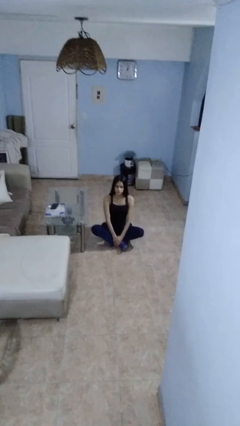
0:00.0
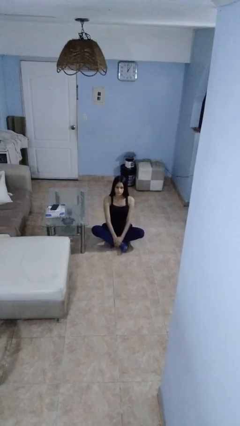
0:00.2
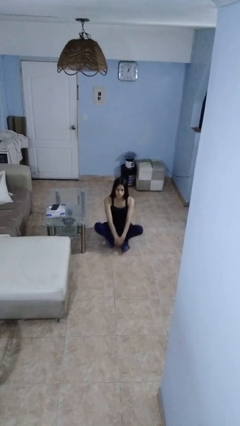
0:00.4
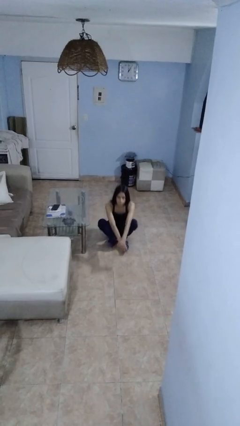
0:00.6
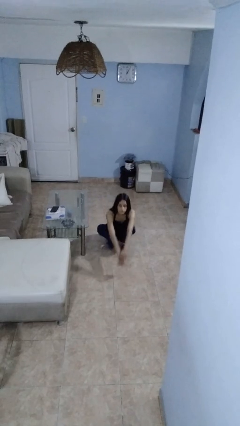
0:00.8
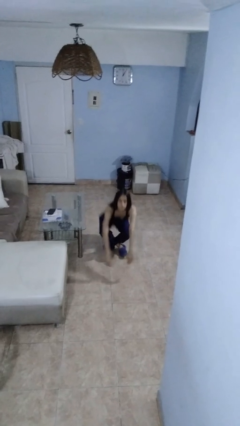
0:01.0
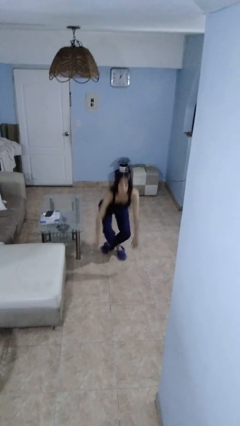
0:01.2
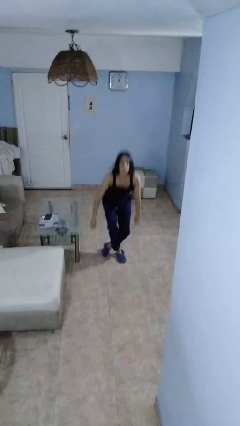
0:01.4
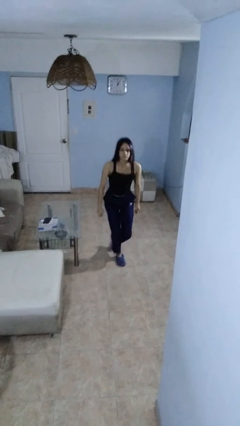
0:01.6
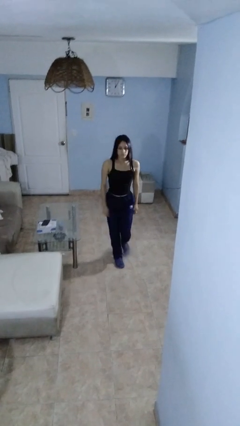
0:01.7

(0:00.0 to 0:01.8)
person stands up from floor

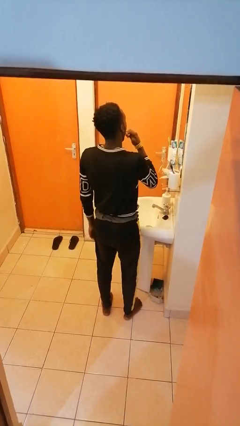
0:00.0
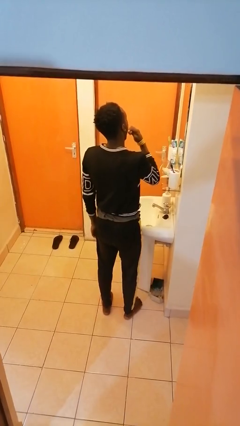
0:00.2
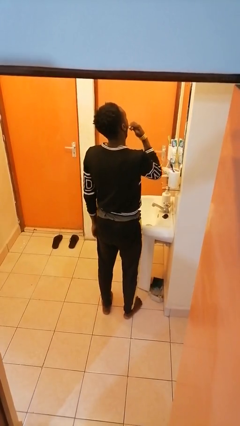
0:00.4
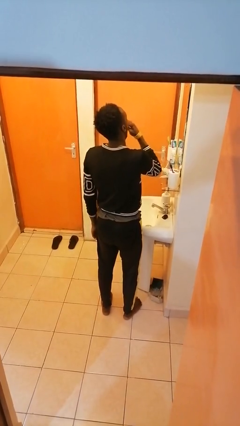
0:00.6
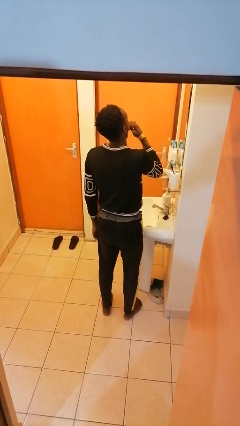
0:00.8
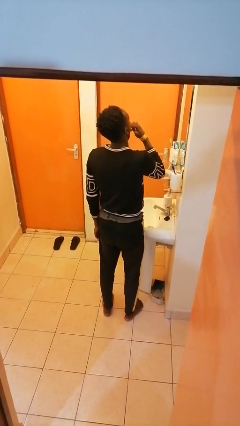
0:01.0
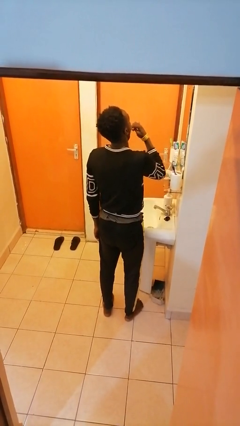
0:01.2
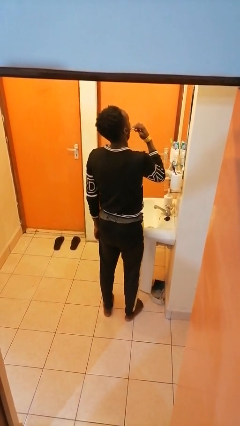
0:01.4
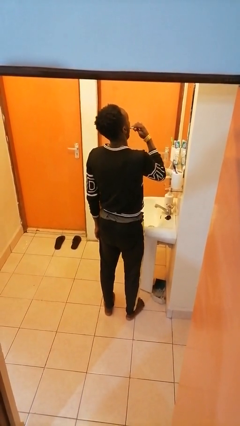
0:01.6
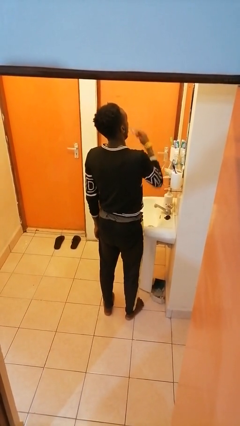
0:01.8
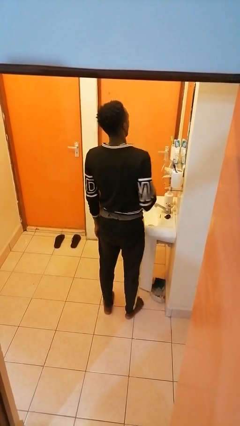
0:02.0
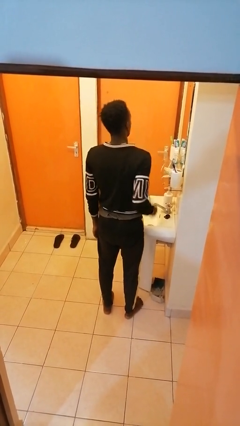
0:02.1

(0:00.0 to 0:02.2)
person brushes teeth

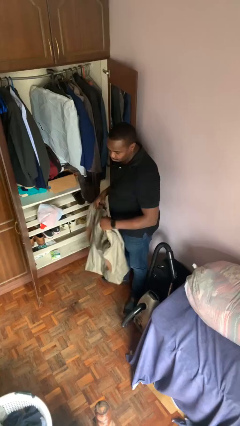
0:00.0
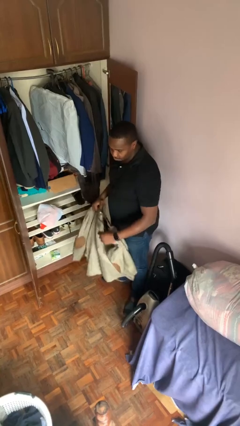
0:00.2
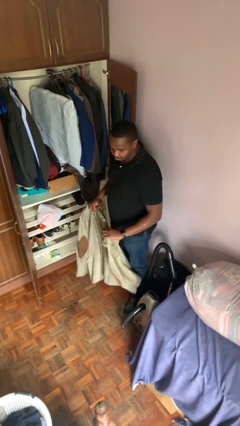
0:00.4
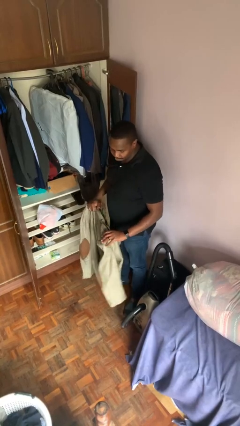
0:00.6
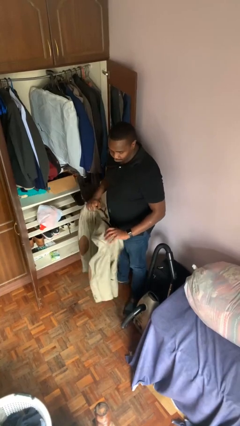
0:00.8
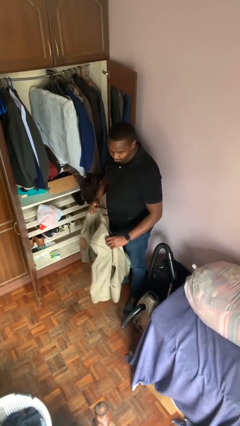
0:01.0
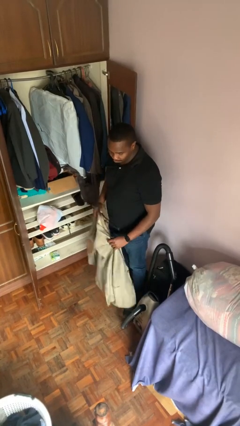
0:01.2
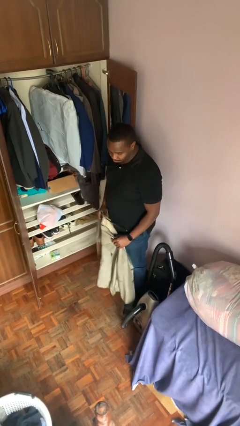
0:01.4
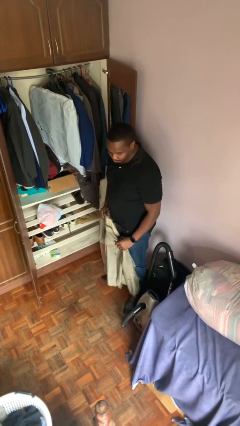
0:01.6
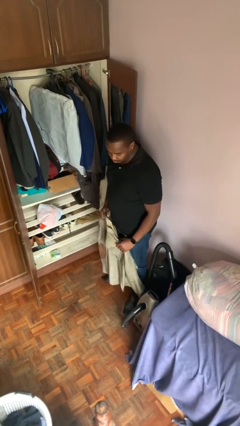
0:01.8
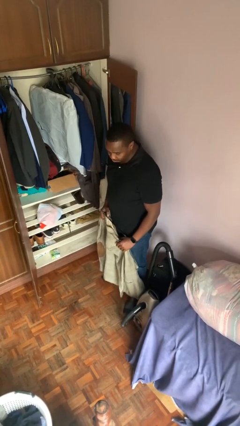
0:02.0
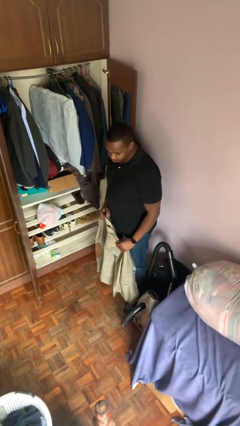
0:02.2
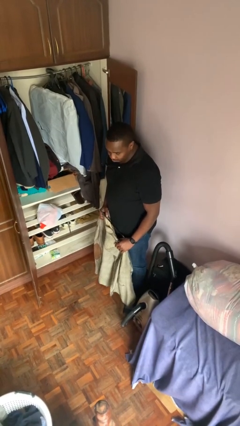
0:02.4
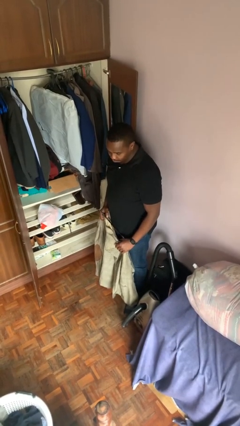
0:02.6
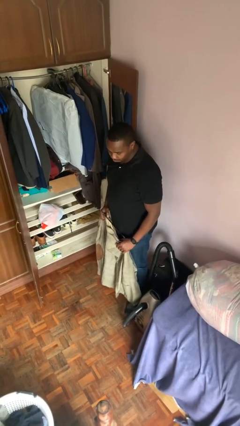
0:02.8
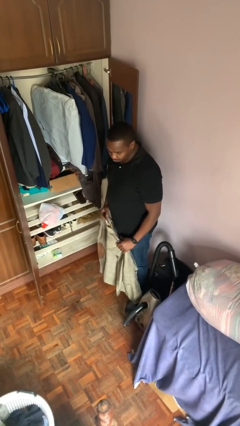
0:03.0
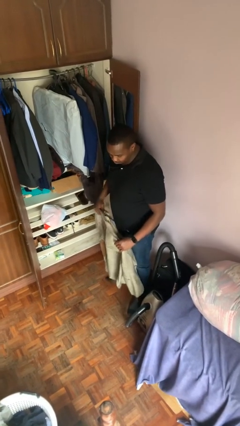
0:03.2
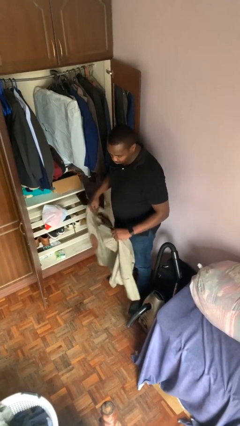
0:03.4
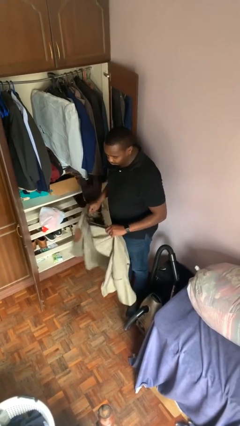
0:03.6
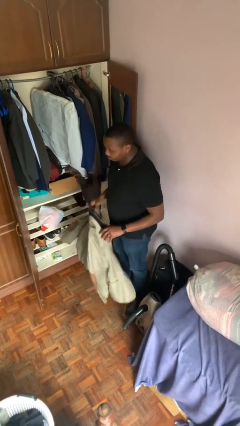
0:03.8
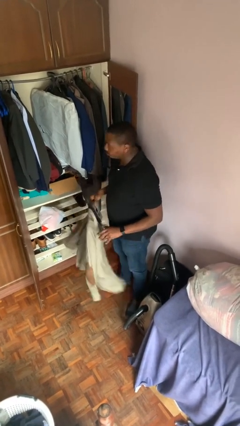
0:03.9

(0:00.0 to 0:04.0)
person takes clothes from closet

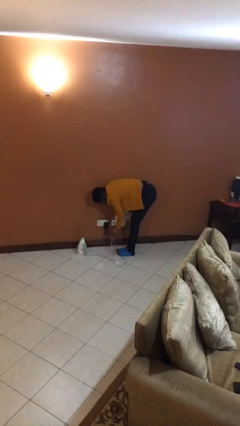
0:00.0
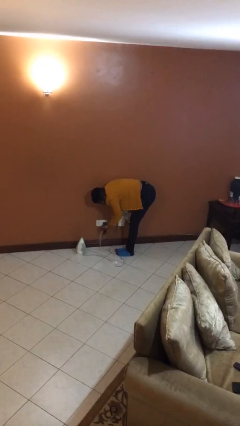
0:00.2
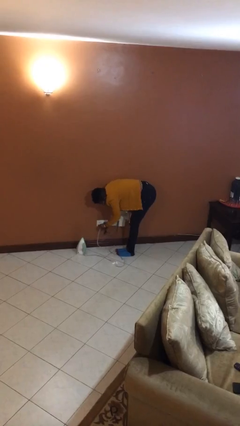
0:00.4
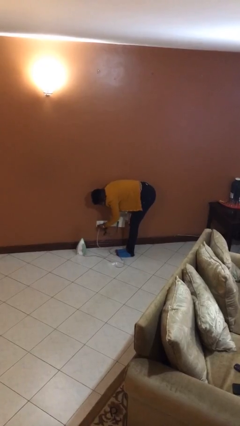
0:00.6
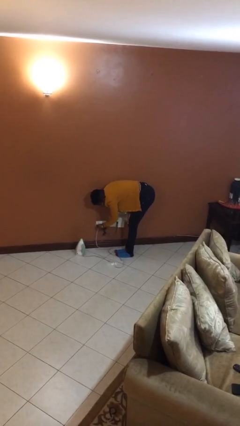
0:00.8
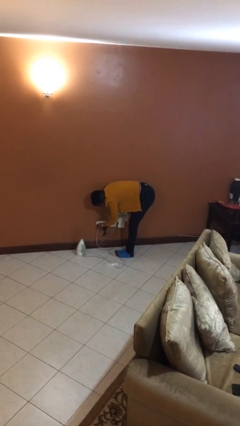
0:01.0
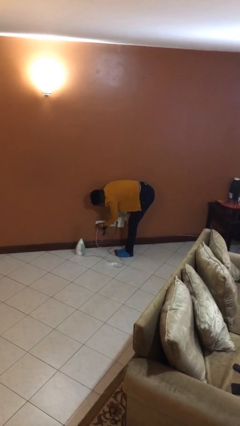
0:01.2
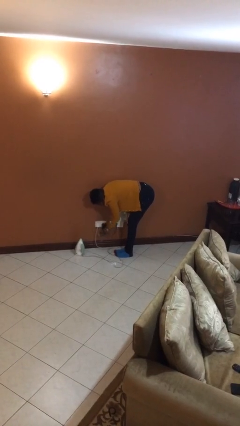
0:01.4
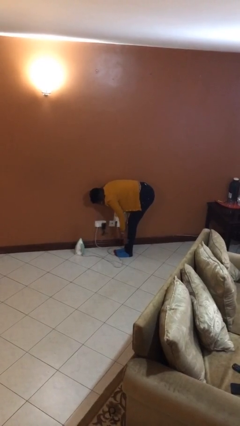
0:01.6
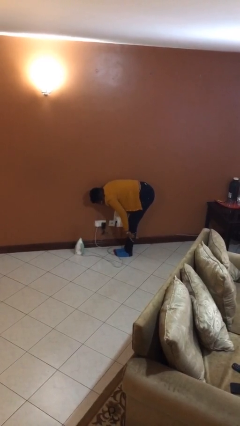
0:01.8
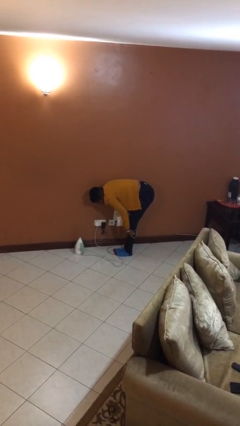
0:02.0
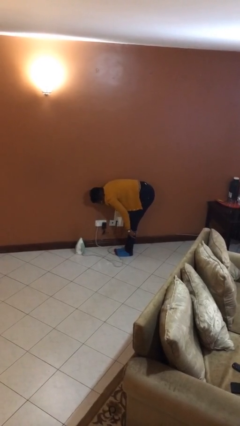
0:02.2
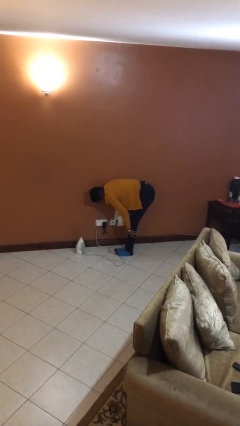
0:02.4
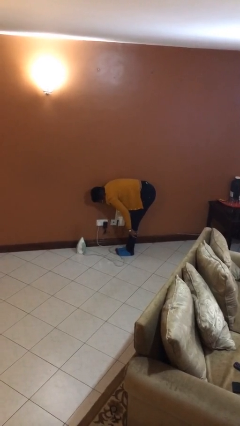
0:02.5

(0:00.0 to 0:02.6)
person plugs into electrical socket

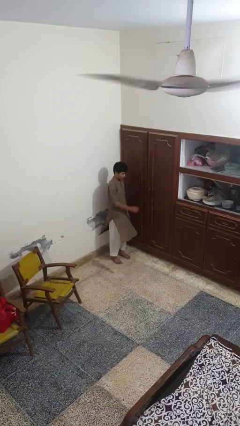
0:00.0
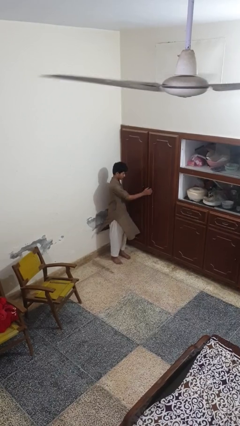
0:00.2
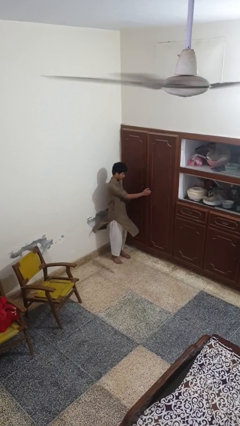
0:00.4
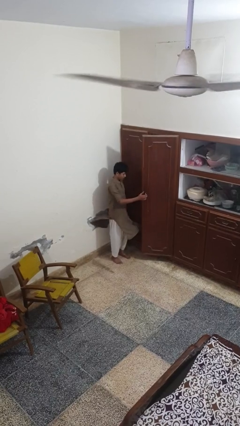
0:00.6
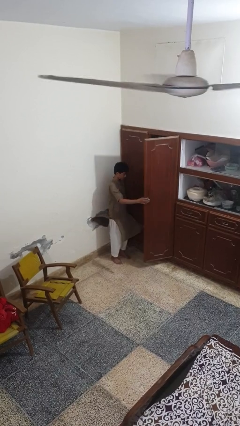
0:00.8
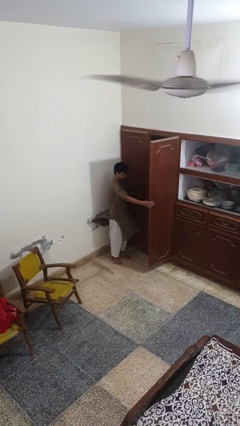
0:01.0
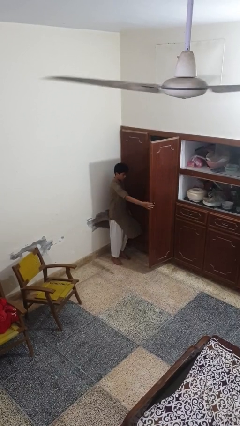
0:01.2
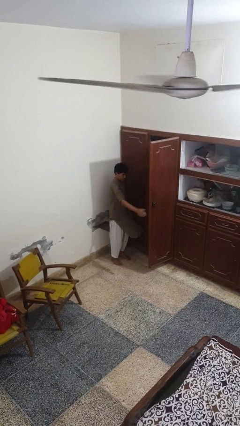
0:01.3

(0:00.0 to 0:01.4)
person opens closet door

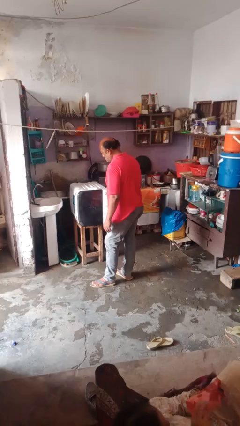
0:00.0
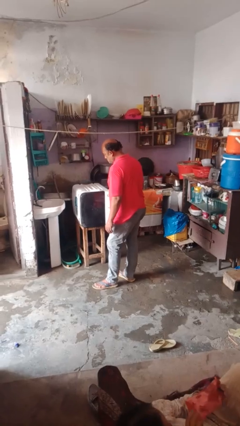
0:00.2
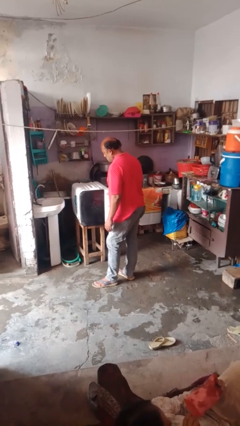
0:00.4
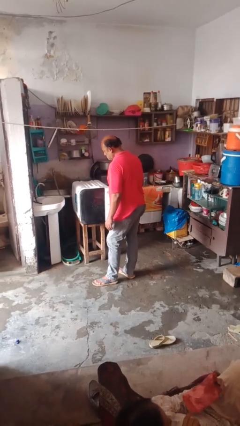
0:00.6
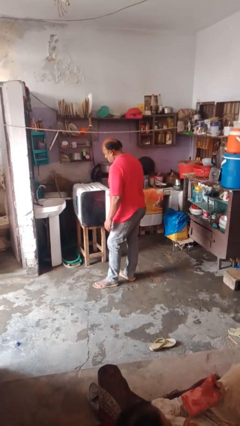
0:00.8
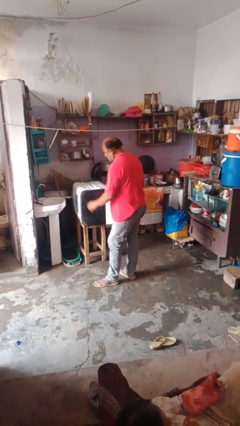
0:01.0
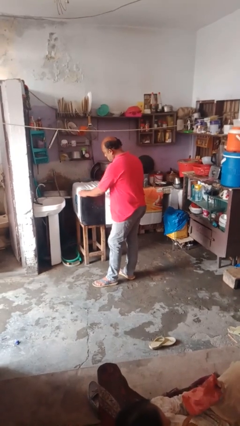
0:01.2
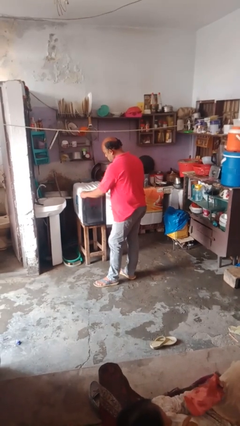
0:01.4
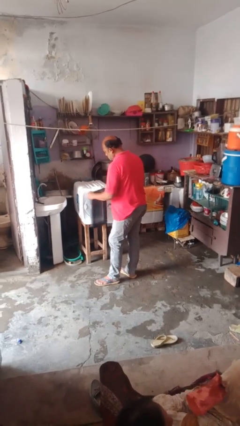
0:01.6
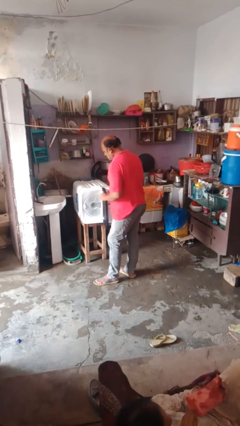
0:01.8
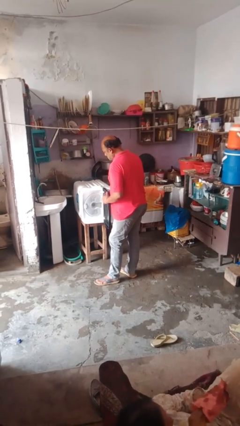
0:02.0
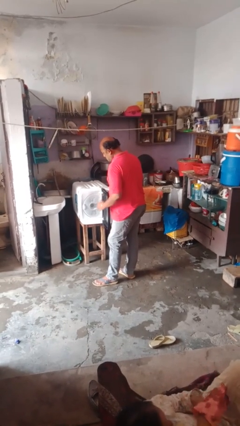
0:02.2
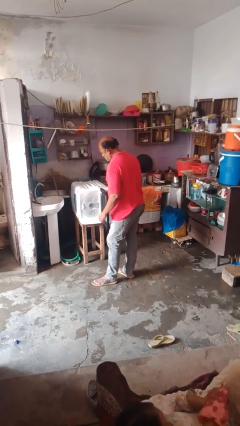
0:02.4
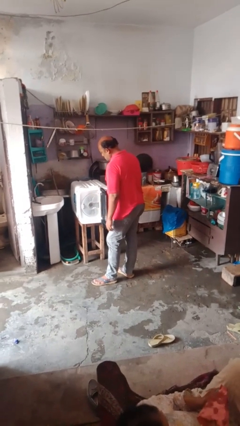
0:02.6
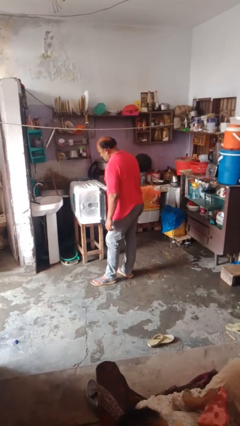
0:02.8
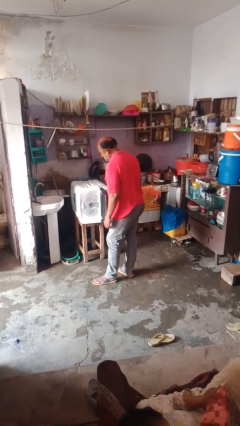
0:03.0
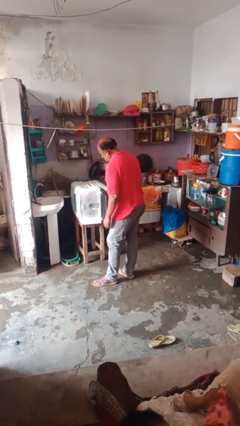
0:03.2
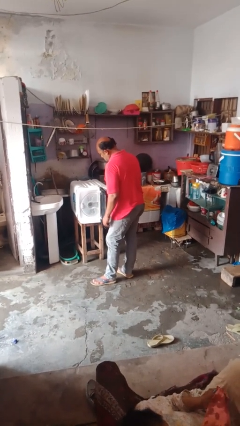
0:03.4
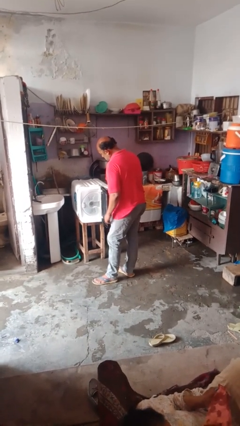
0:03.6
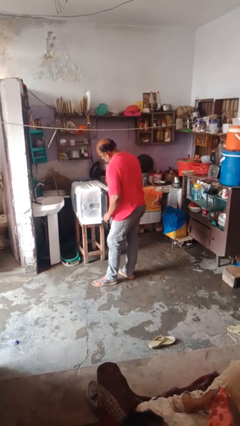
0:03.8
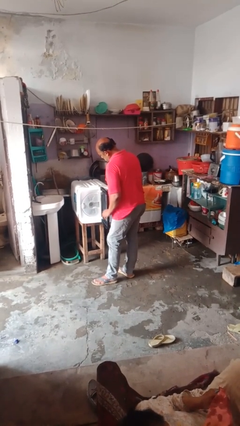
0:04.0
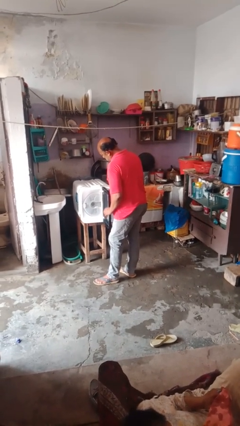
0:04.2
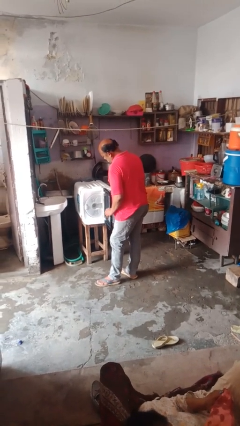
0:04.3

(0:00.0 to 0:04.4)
person opens dishwasher

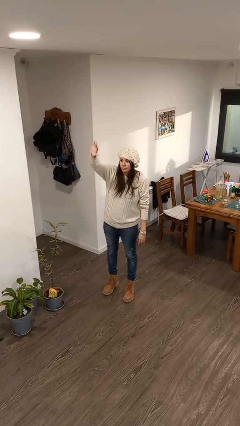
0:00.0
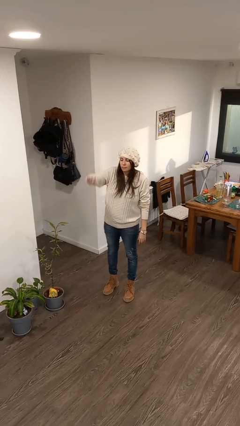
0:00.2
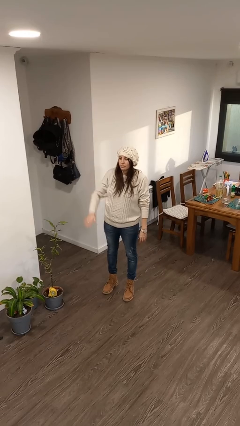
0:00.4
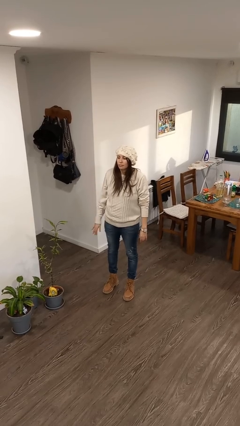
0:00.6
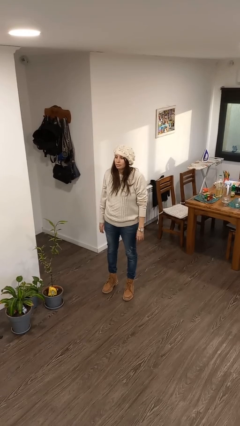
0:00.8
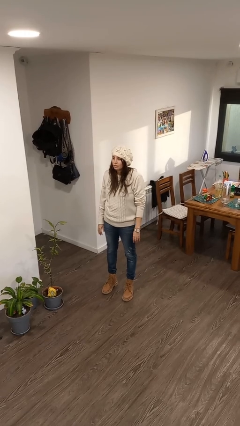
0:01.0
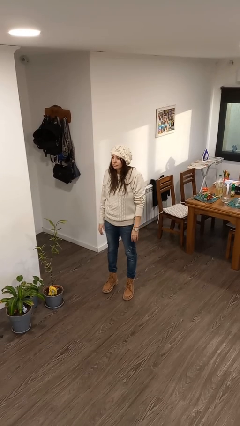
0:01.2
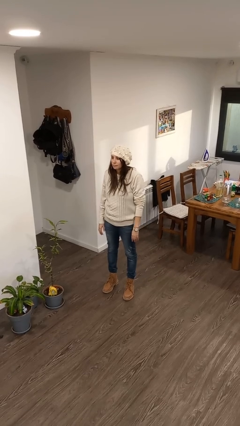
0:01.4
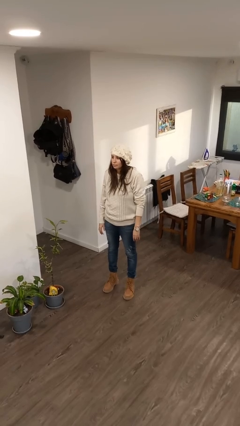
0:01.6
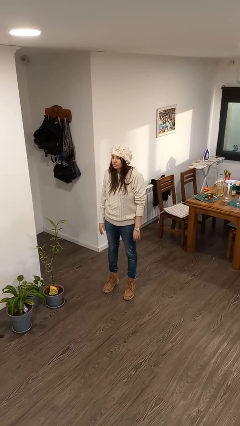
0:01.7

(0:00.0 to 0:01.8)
person gestures lower hand
